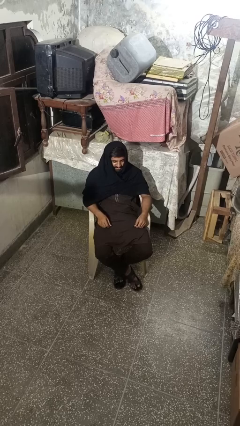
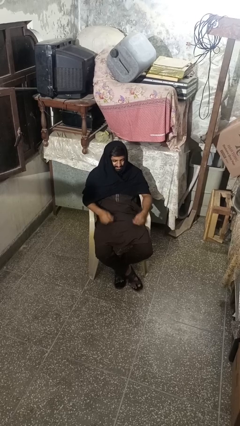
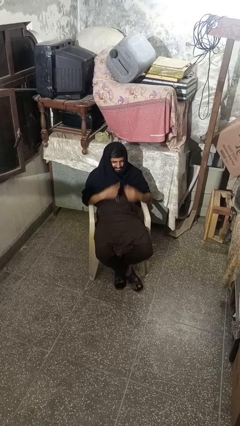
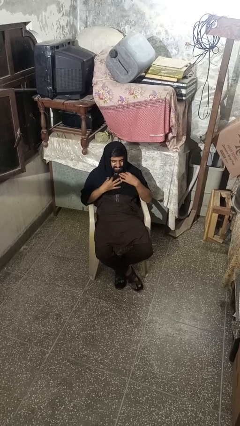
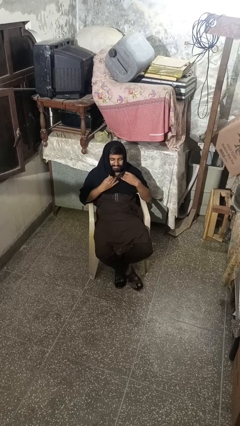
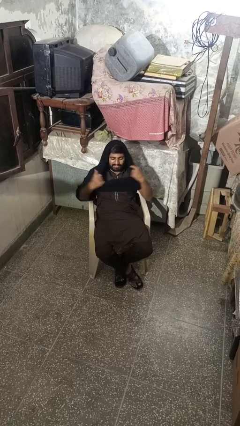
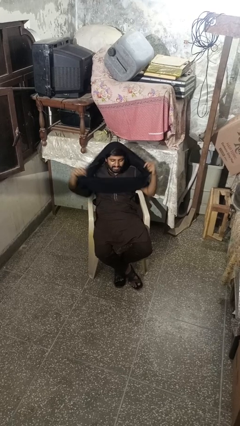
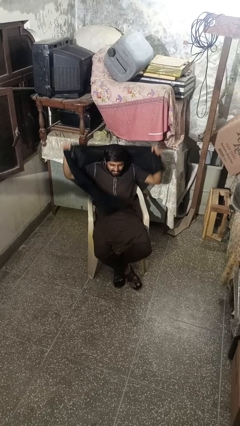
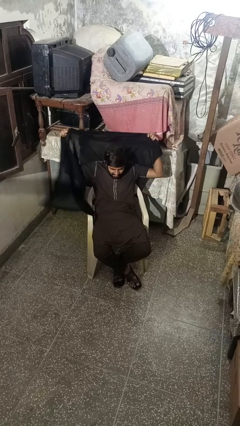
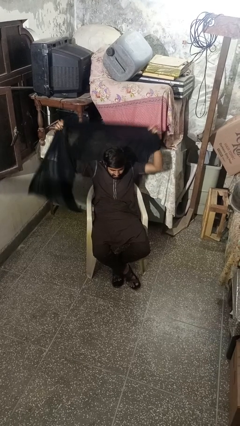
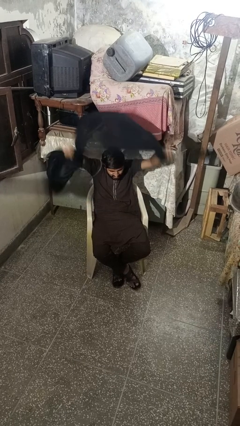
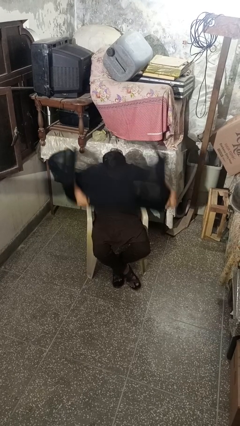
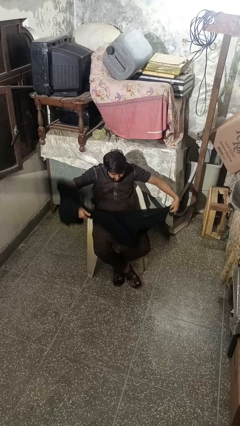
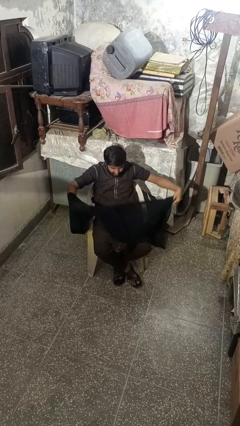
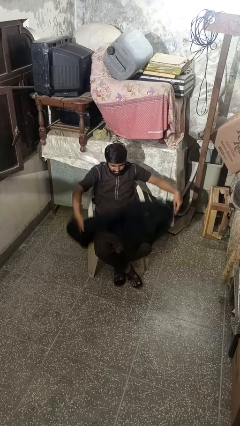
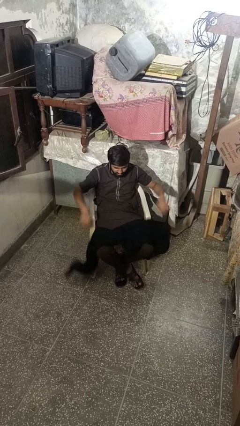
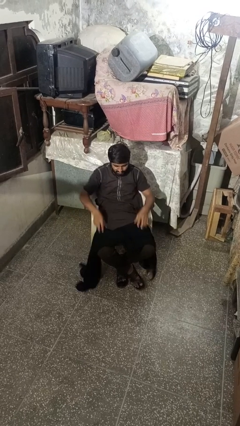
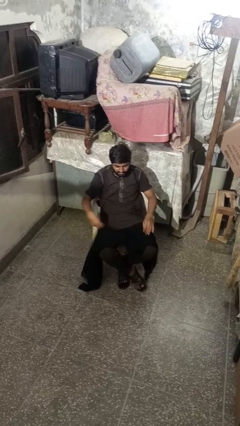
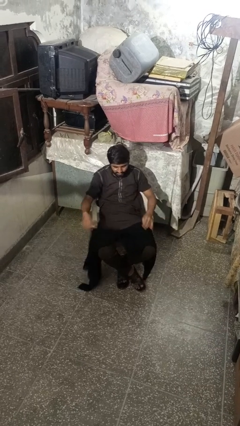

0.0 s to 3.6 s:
person takes off scarf

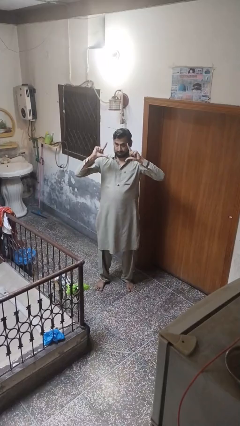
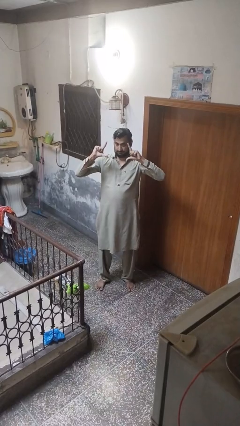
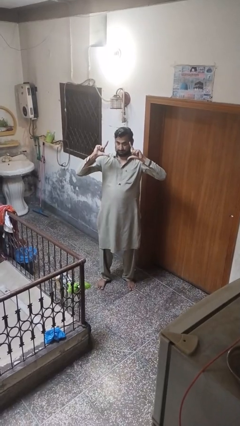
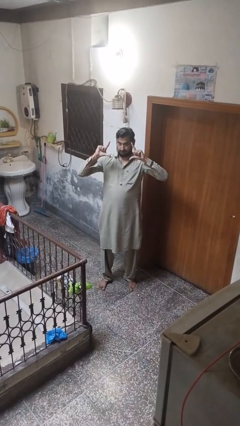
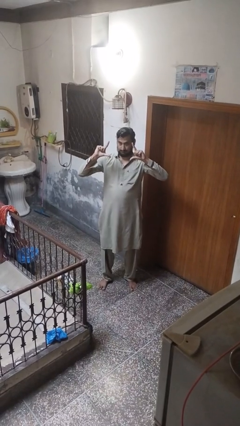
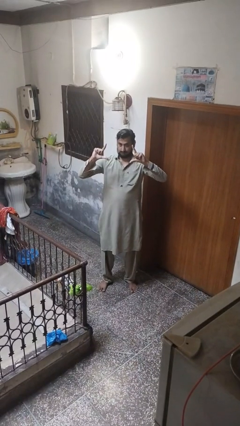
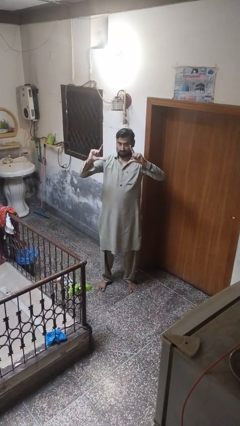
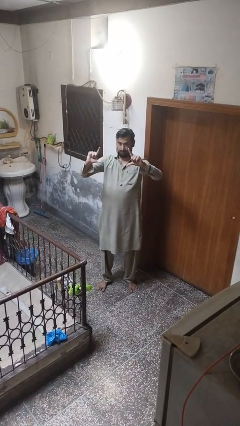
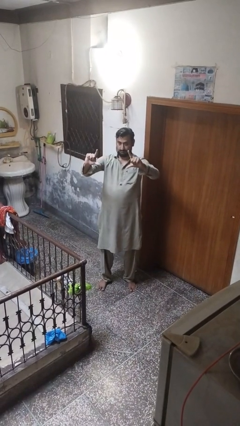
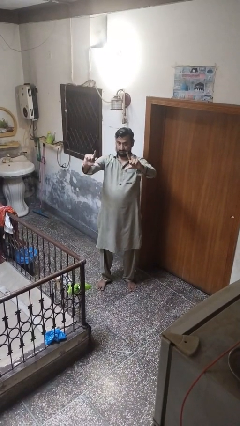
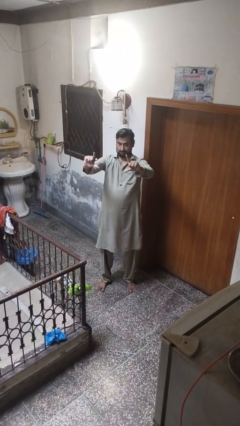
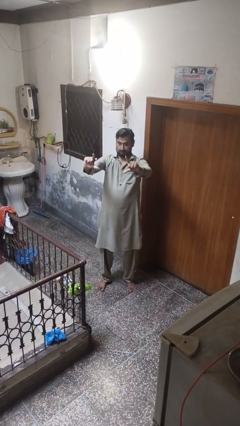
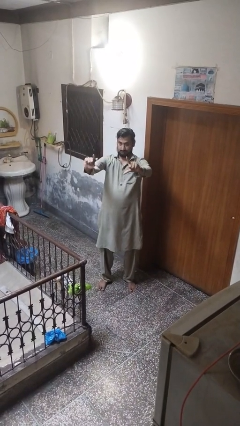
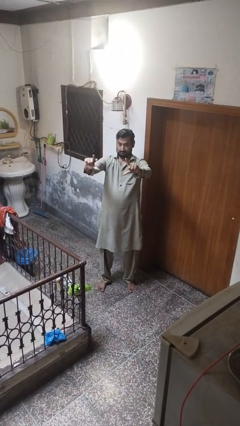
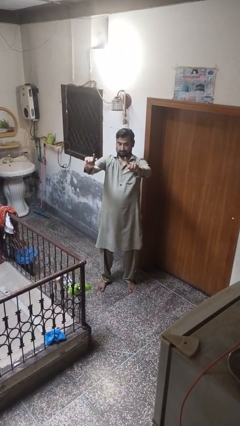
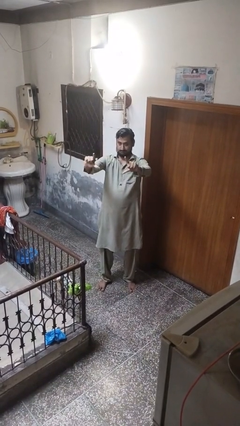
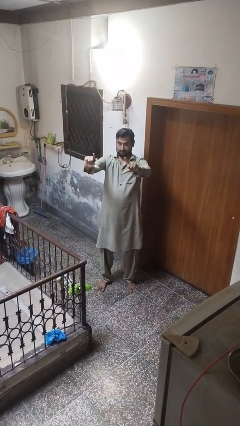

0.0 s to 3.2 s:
person gestures zoom out

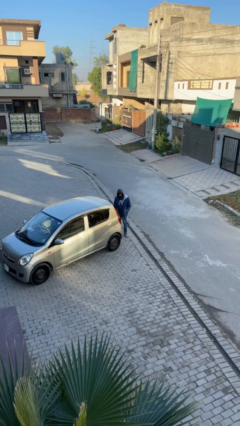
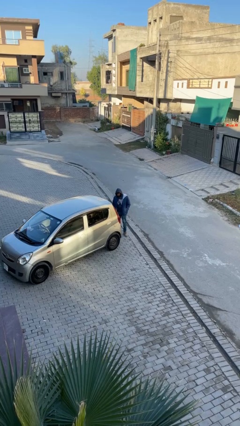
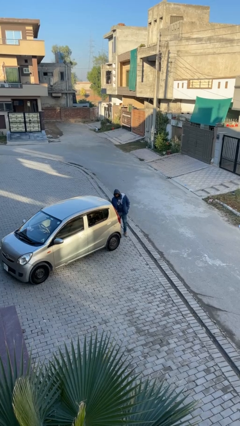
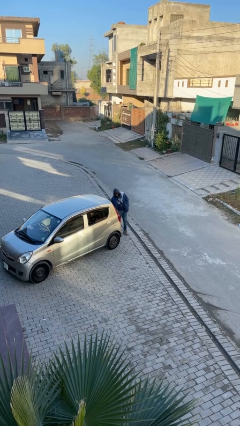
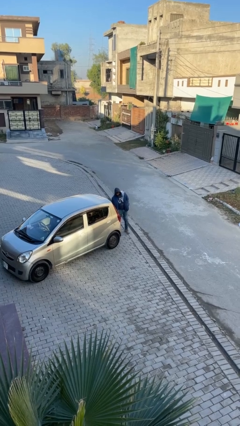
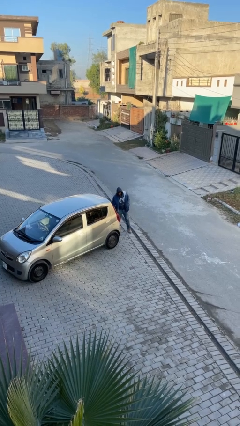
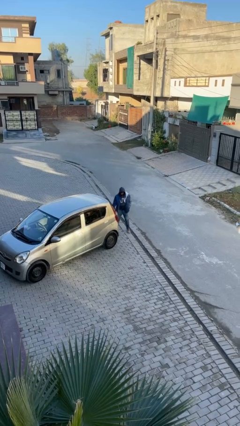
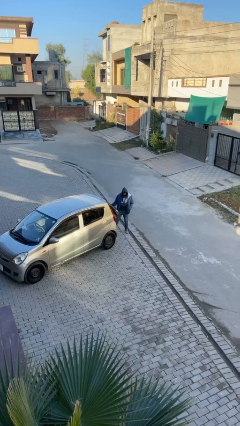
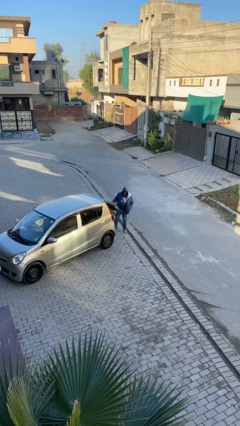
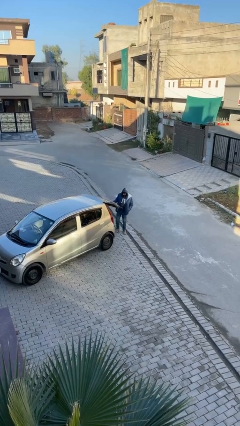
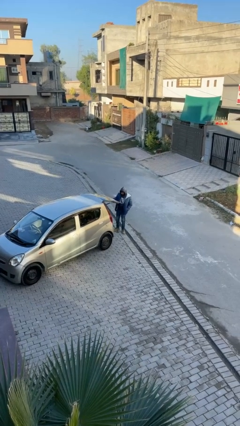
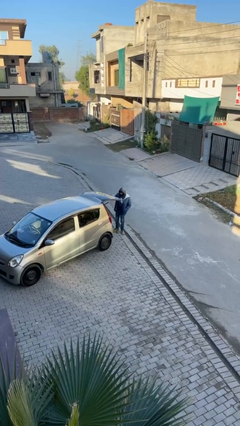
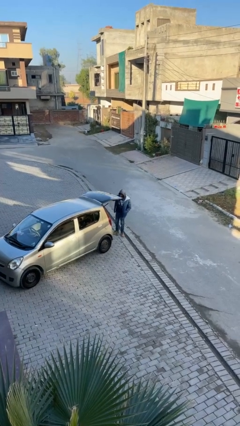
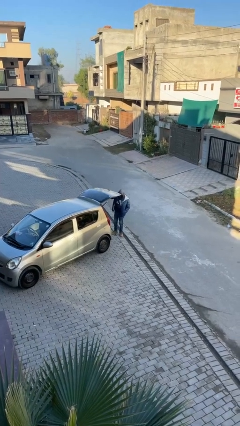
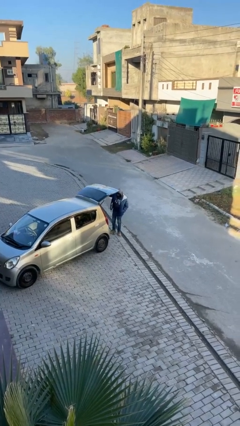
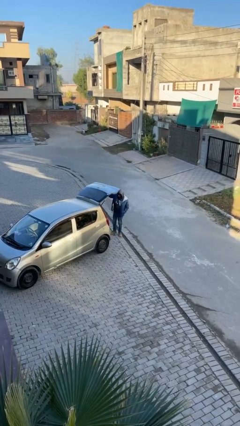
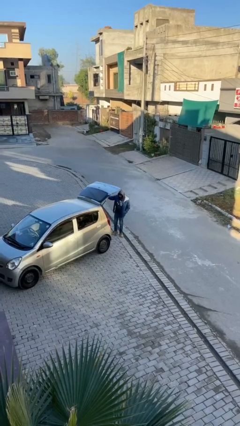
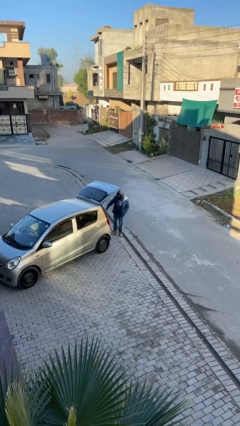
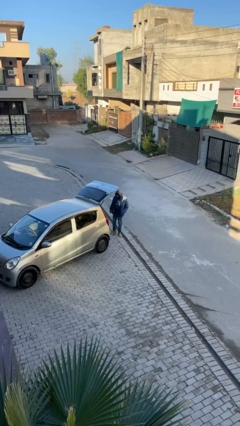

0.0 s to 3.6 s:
person opens car trunk

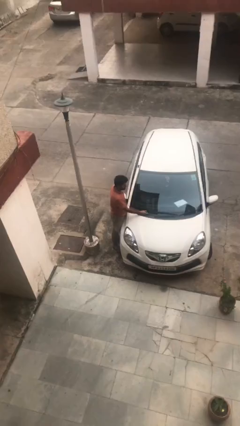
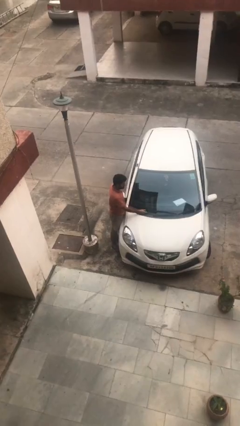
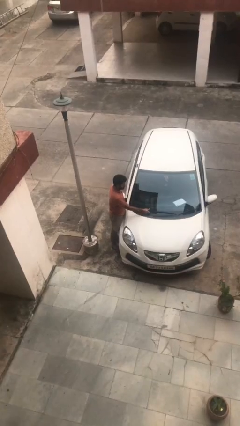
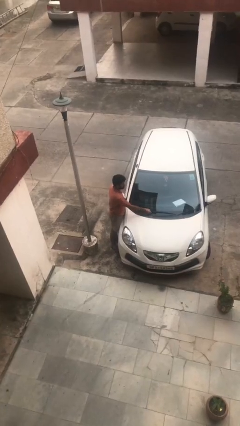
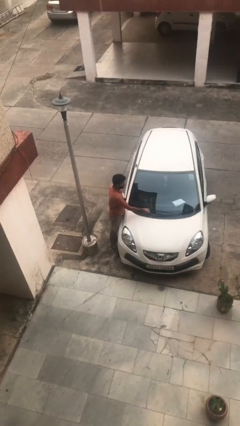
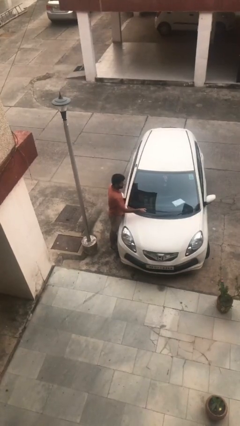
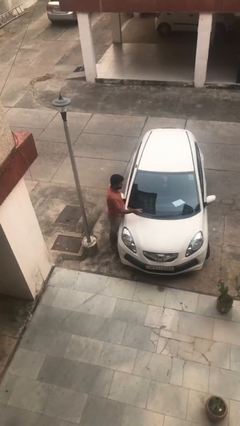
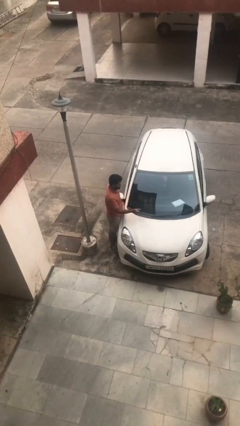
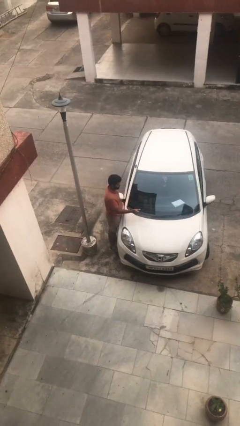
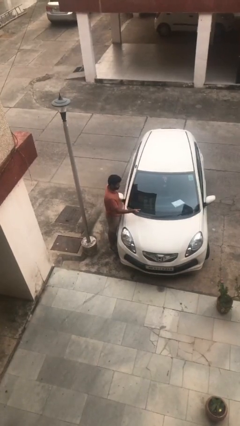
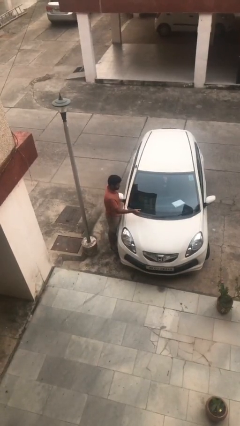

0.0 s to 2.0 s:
person flips up car wipers

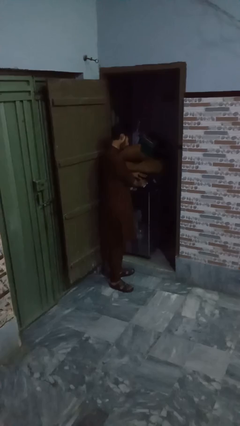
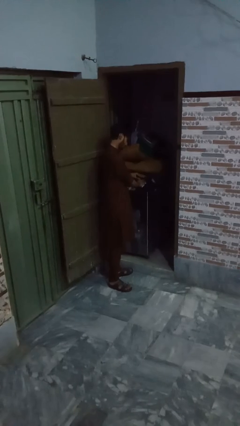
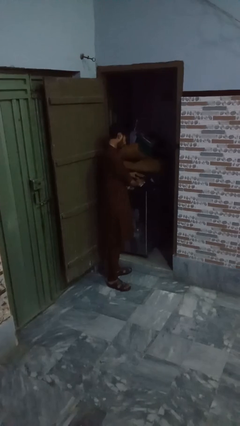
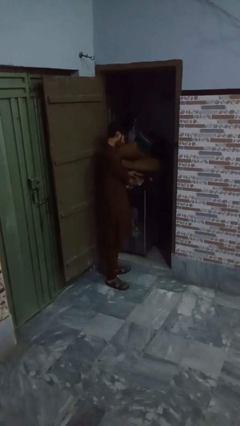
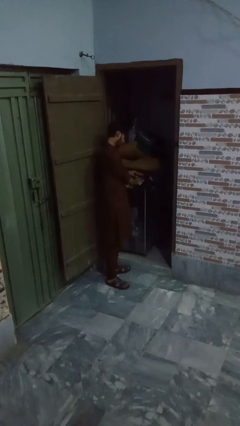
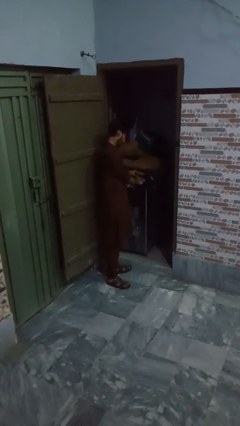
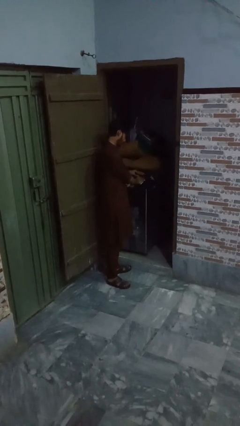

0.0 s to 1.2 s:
person loads dryer

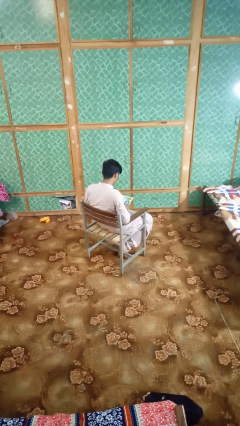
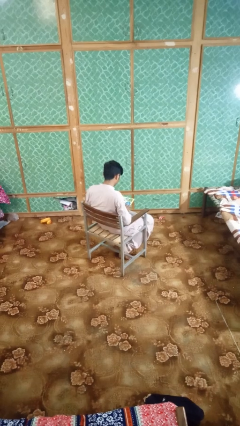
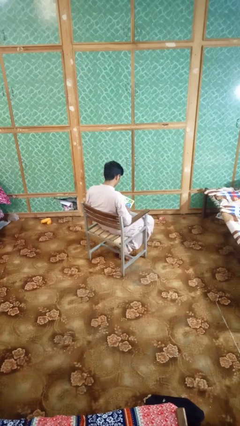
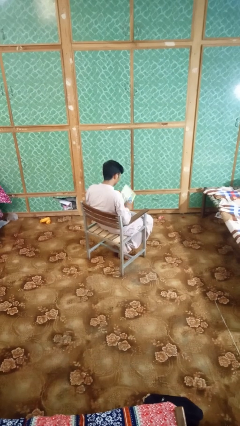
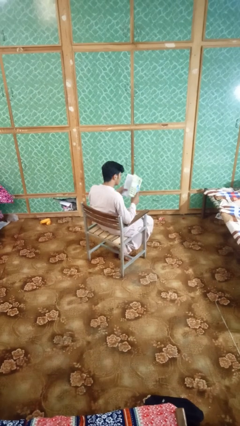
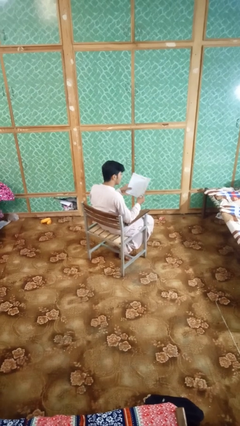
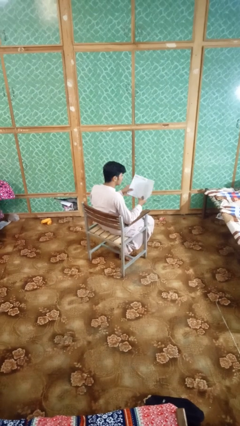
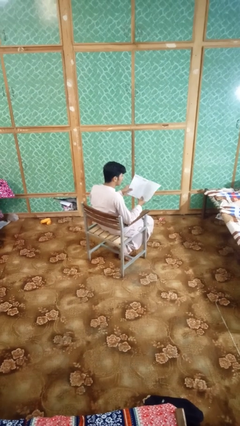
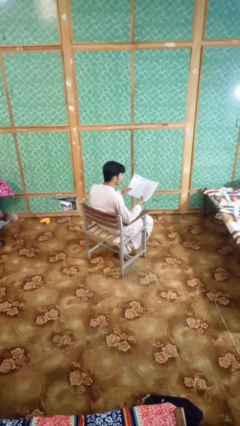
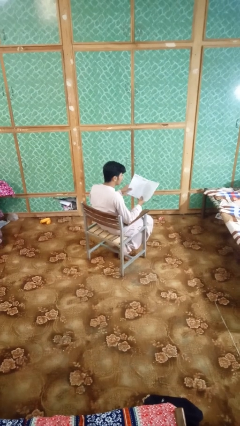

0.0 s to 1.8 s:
person reads magazine

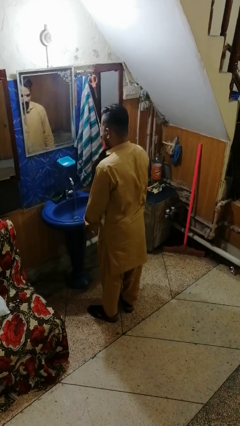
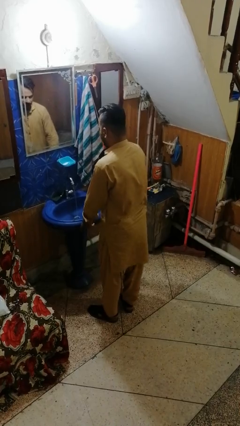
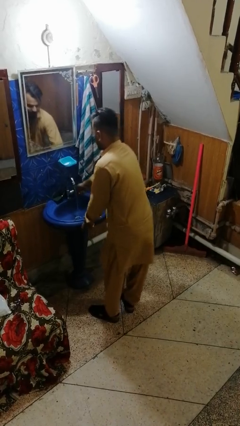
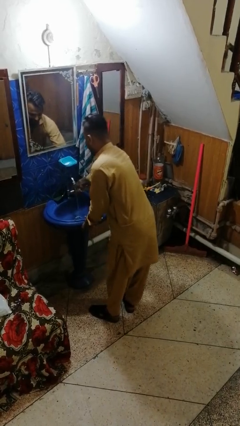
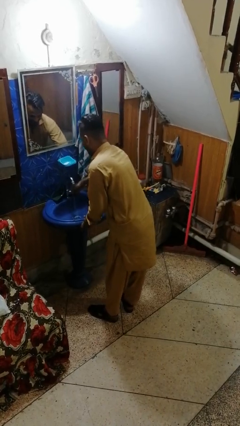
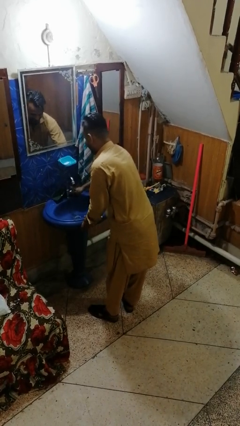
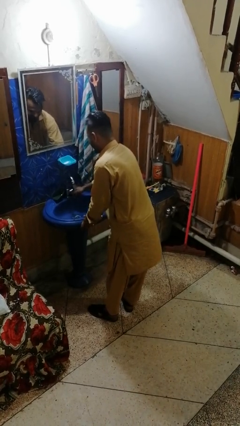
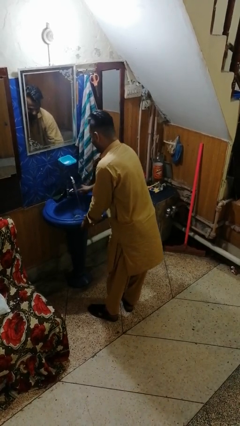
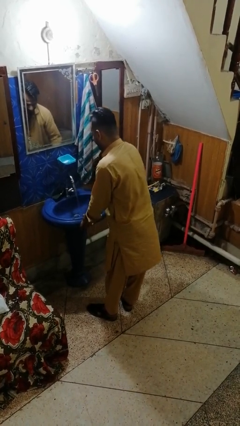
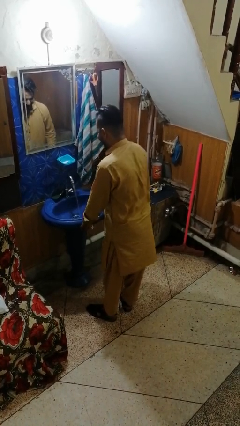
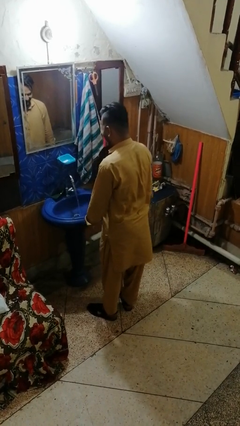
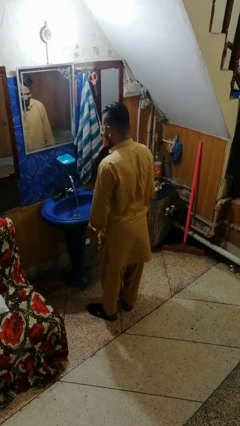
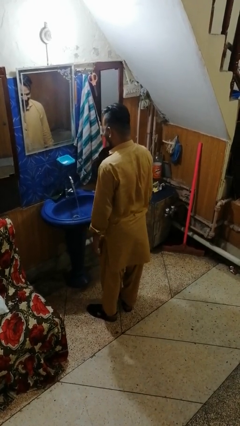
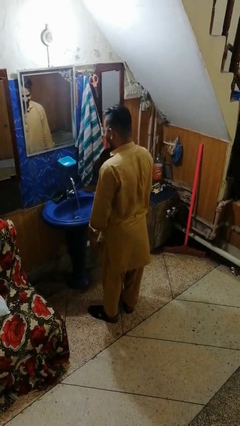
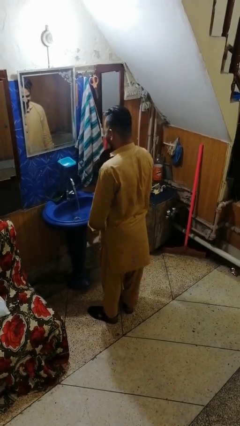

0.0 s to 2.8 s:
person turns on faucet
